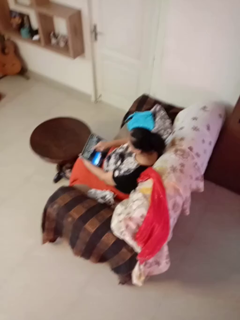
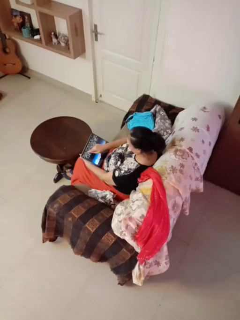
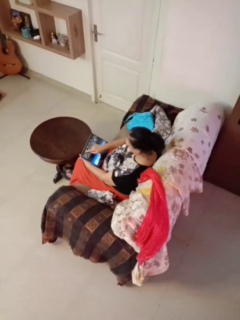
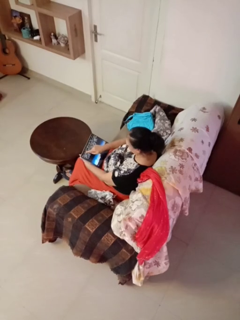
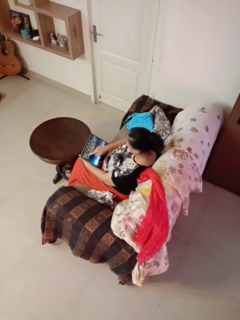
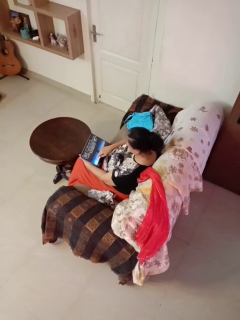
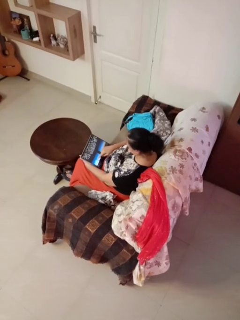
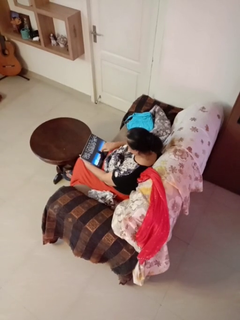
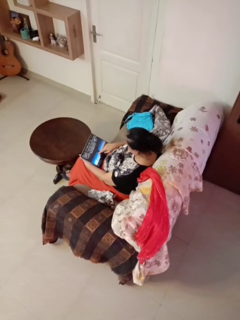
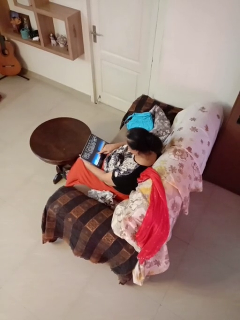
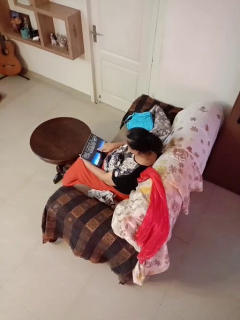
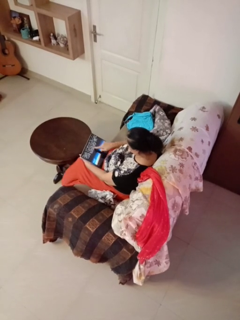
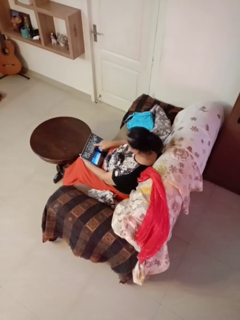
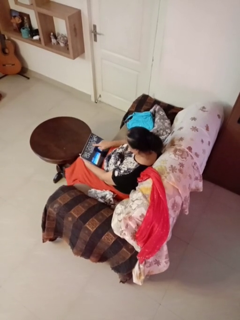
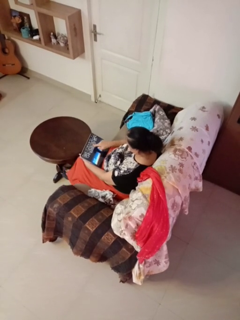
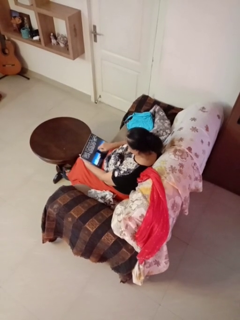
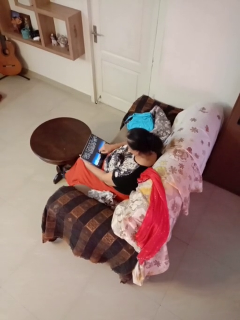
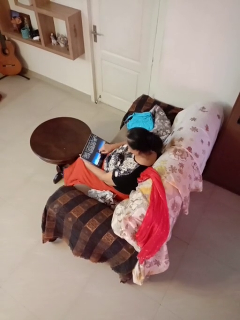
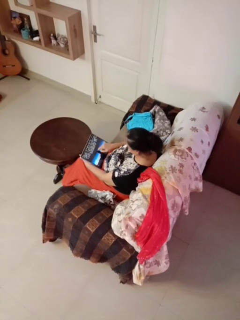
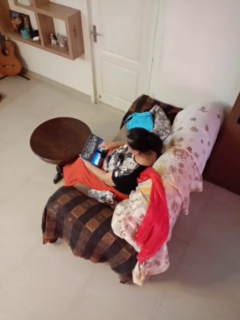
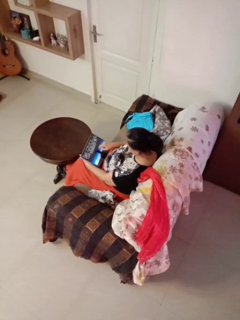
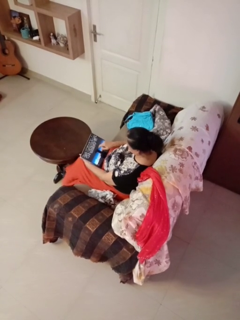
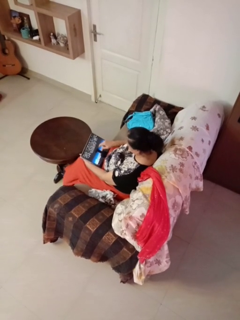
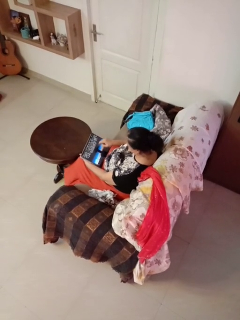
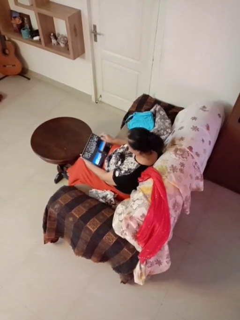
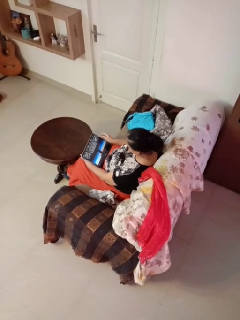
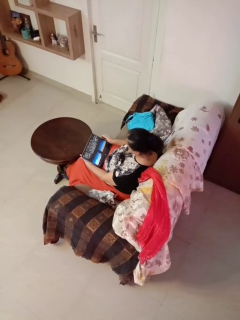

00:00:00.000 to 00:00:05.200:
person interacts with tablet

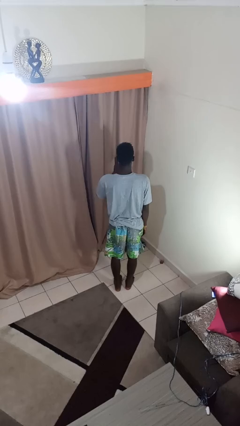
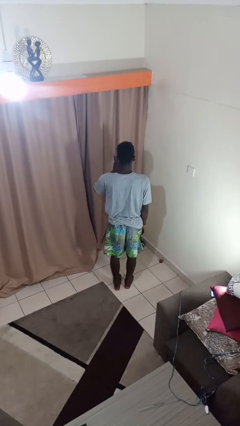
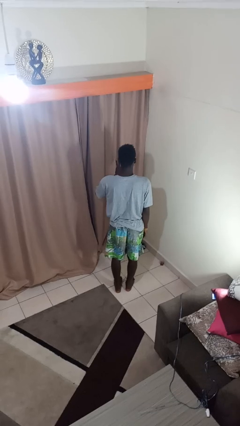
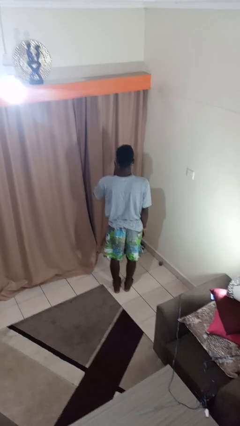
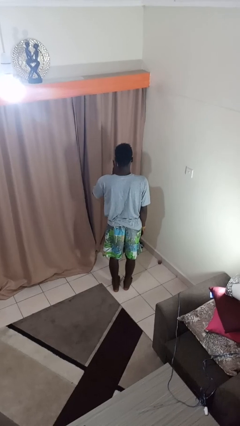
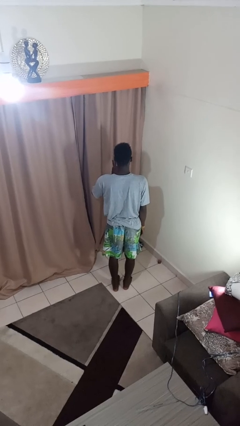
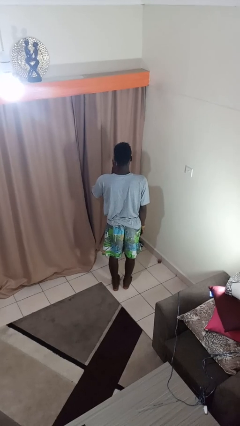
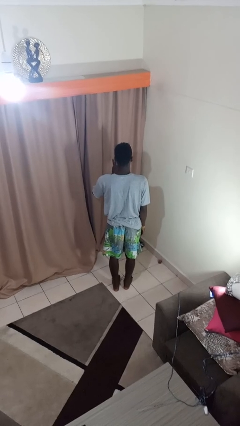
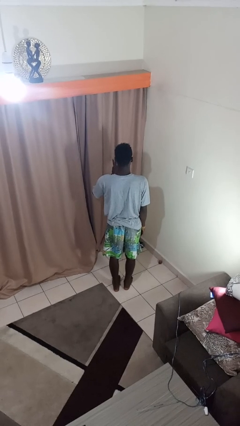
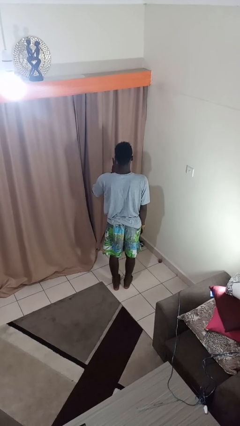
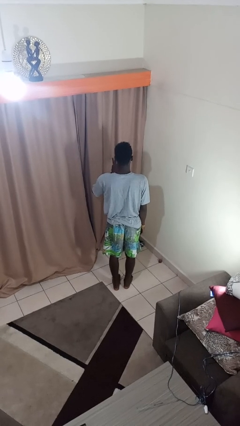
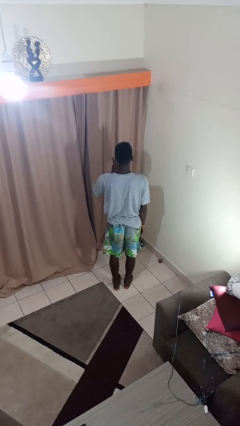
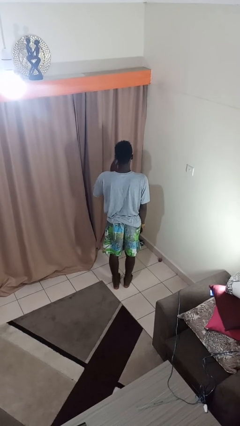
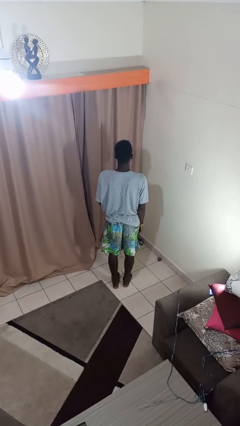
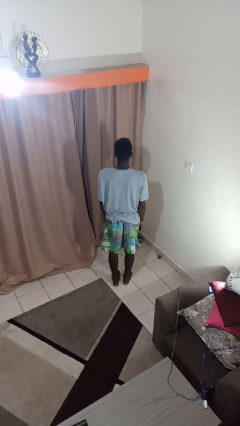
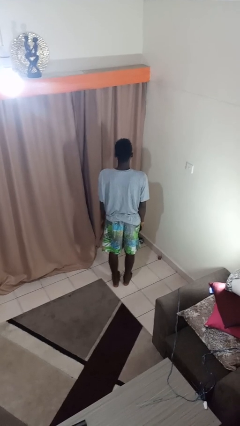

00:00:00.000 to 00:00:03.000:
person gestures number three

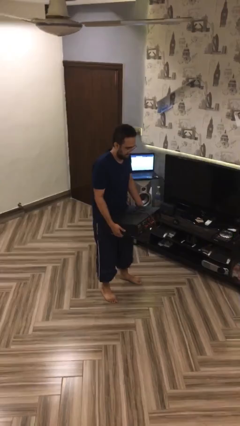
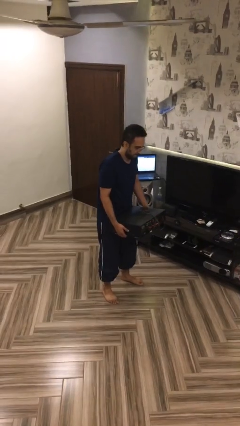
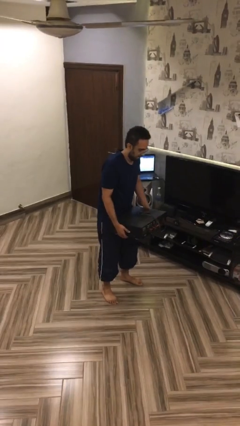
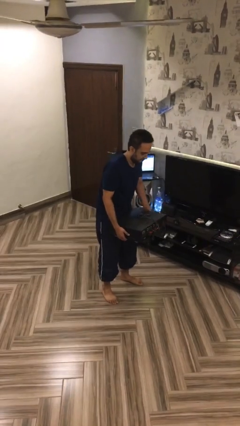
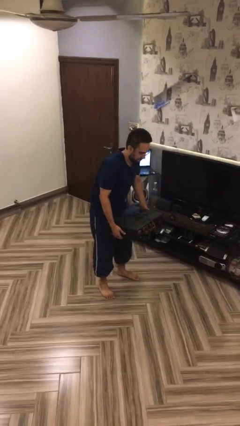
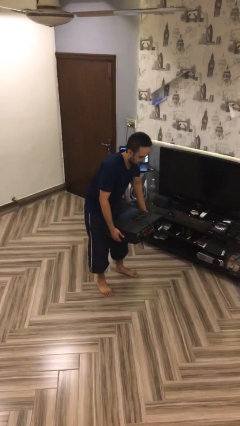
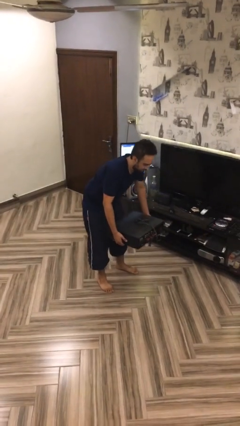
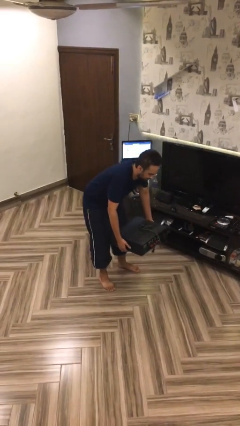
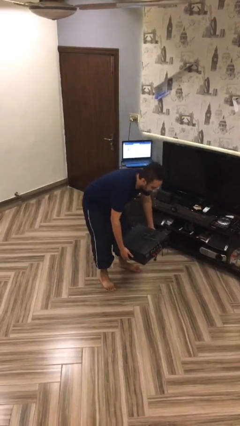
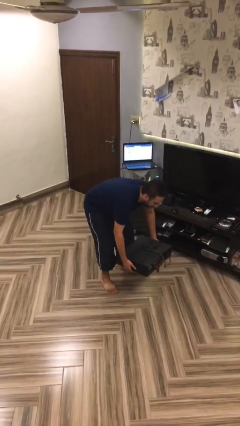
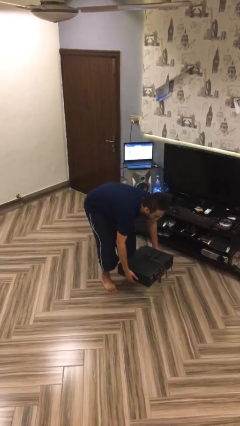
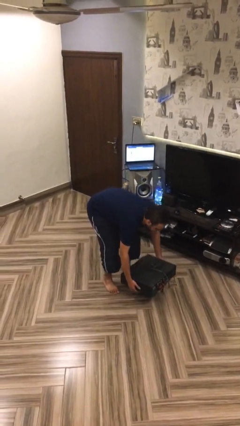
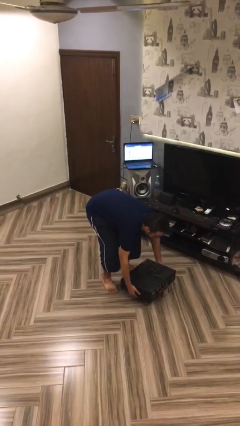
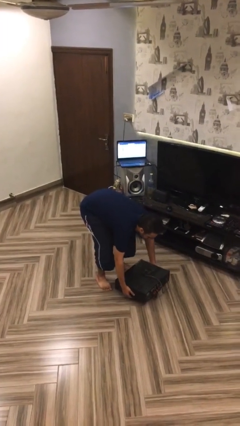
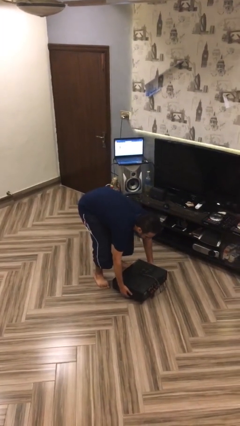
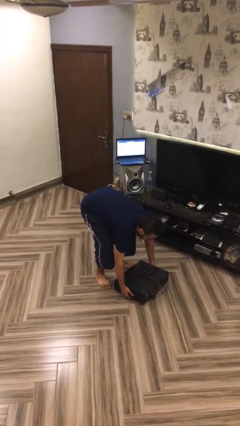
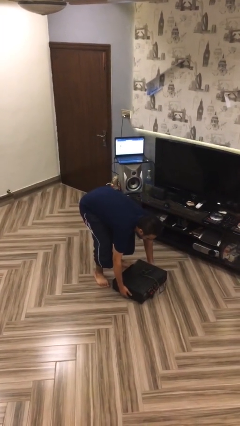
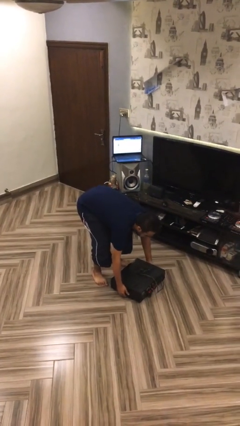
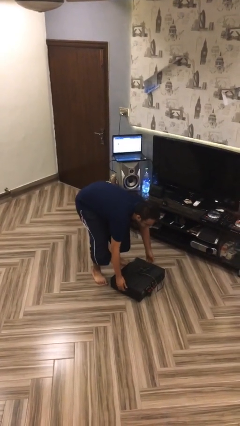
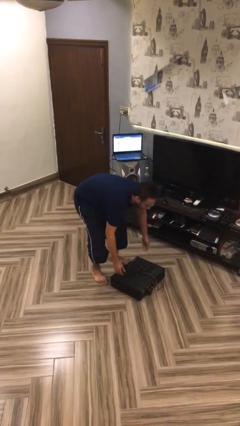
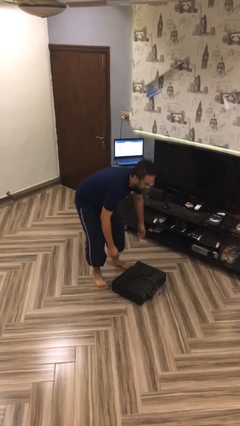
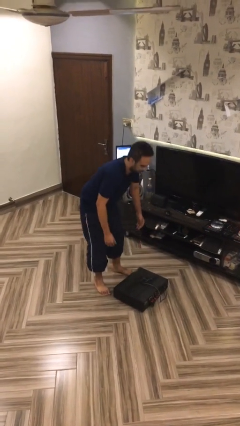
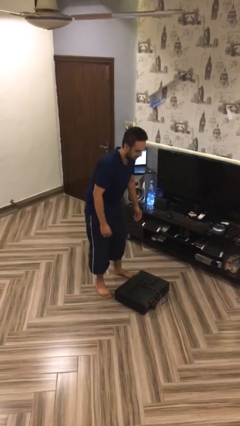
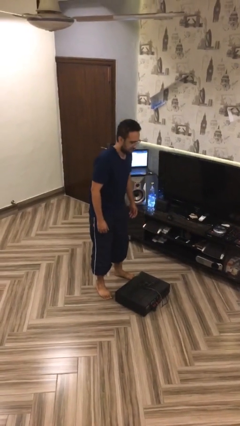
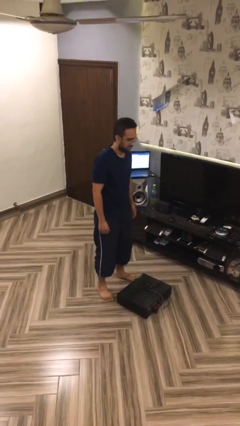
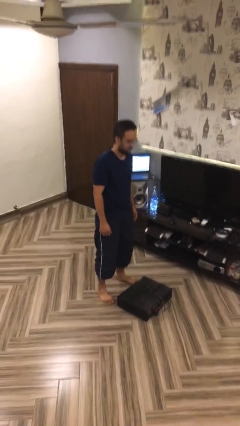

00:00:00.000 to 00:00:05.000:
person puts down object on floor

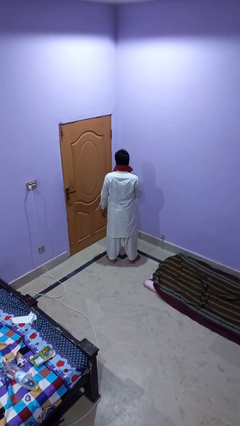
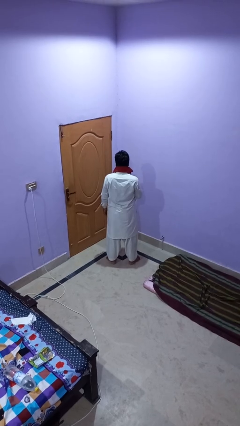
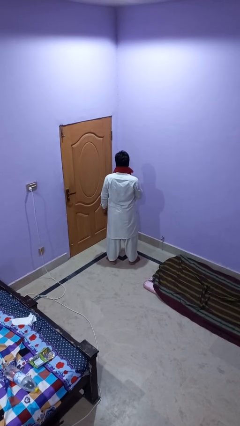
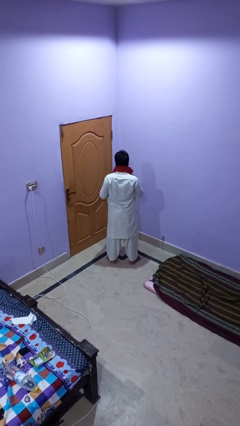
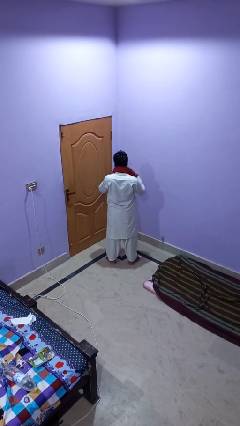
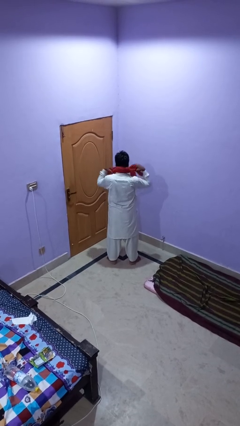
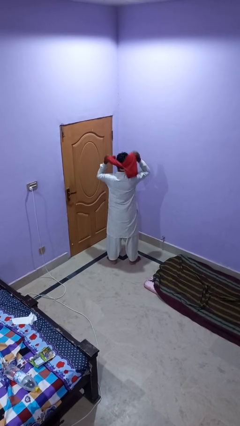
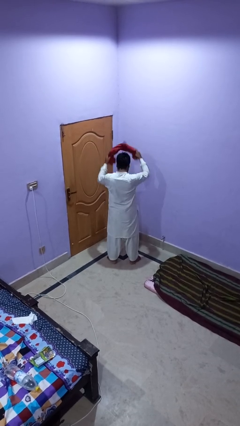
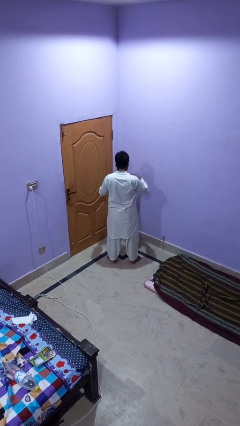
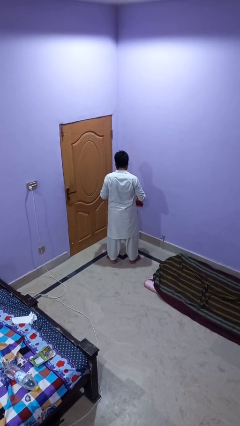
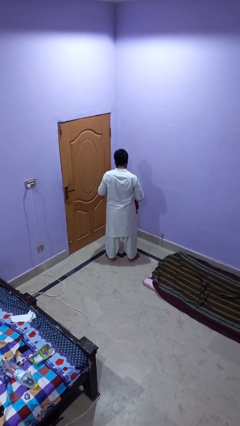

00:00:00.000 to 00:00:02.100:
person takes off scarf

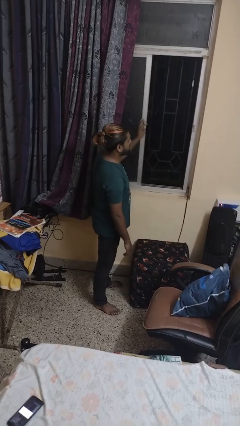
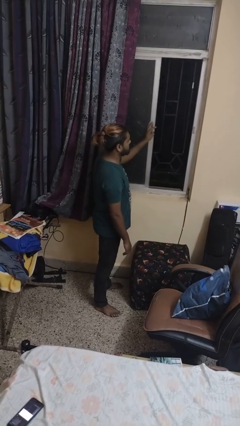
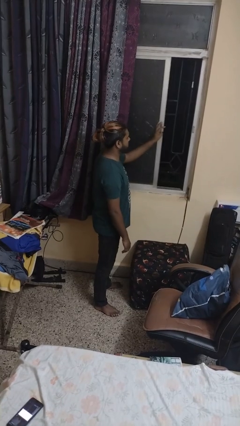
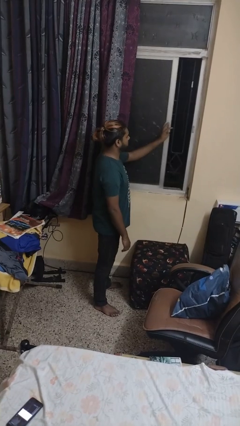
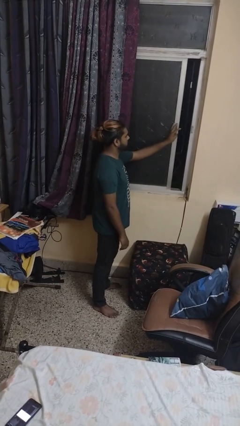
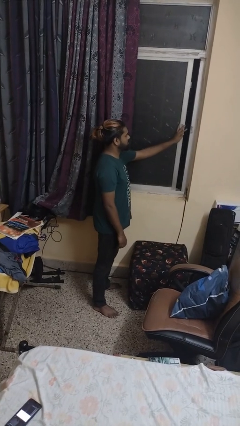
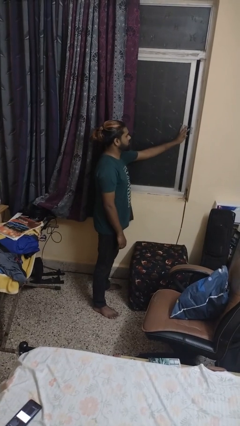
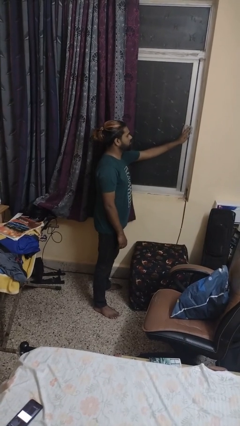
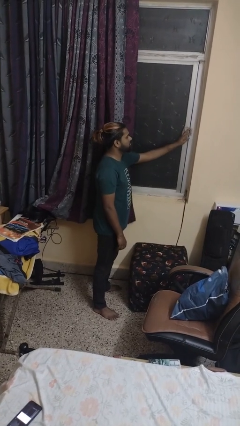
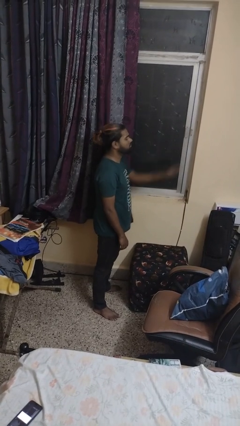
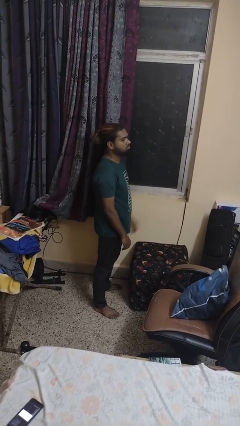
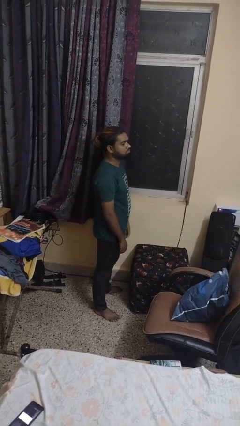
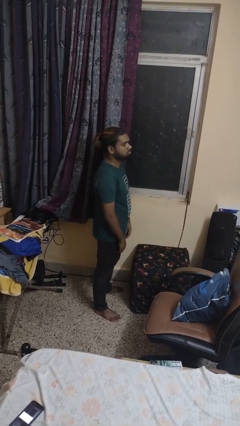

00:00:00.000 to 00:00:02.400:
person closes sliding door

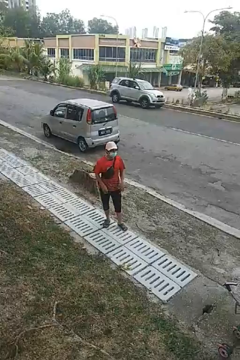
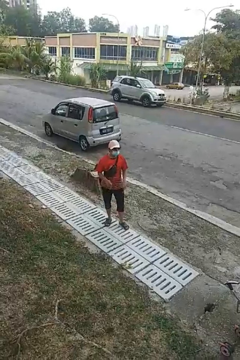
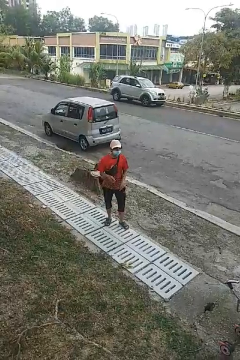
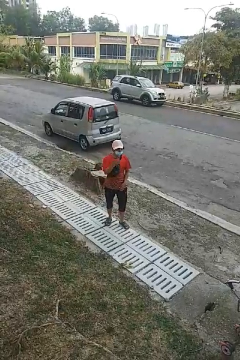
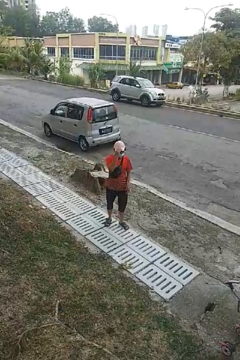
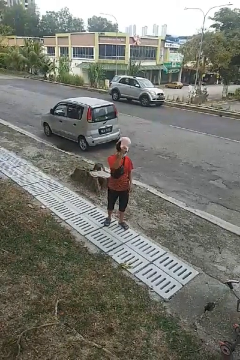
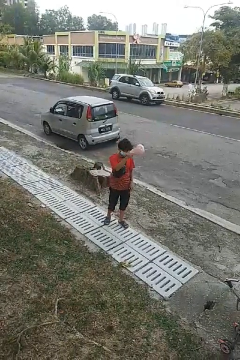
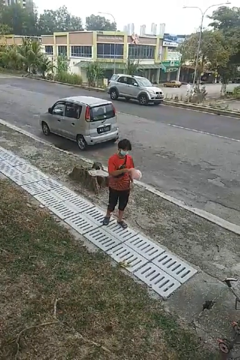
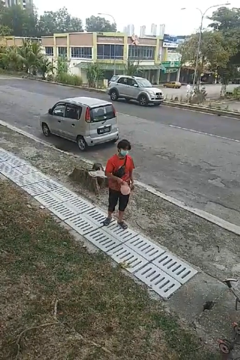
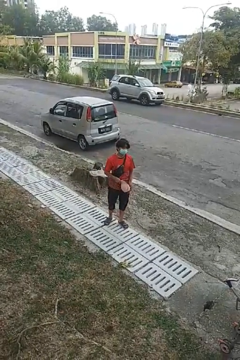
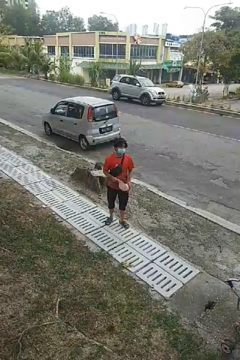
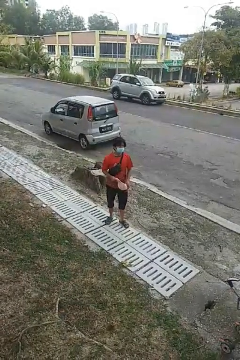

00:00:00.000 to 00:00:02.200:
person takes off hat
